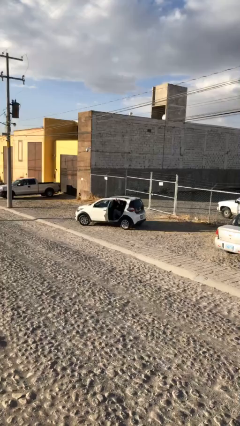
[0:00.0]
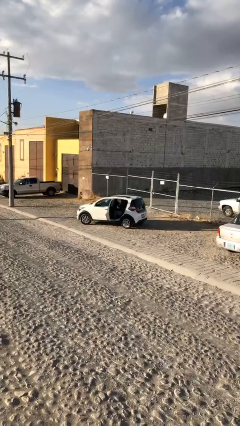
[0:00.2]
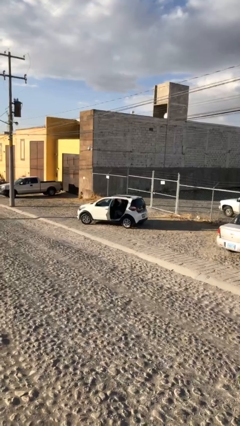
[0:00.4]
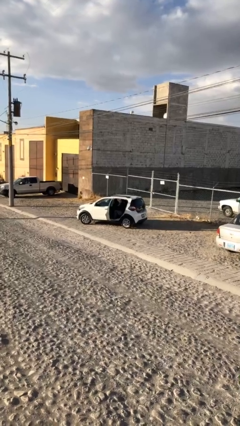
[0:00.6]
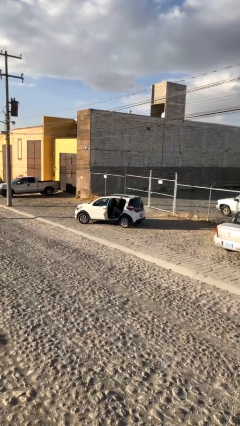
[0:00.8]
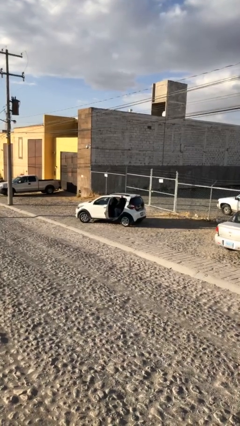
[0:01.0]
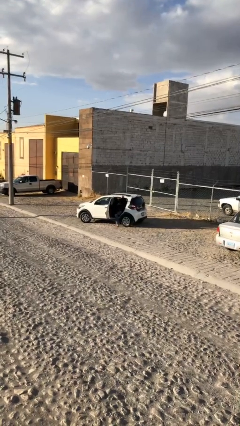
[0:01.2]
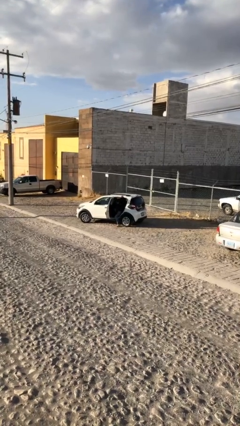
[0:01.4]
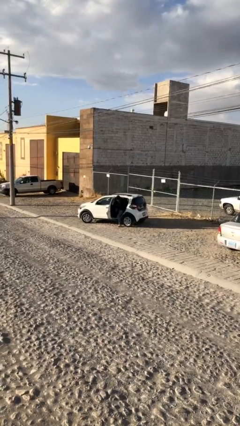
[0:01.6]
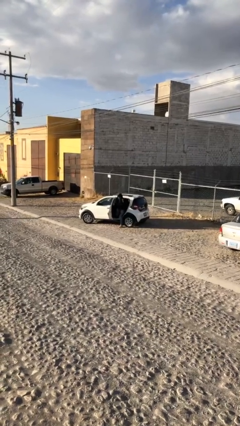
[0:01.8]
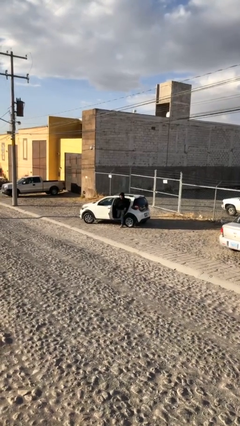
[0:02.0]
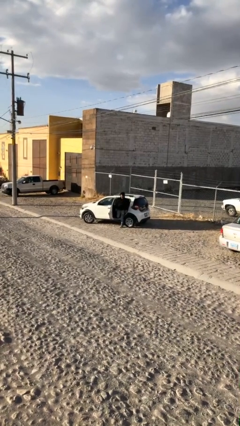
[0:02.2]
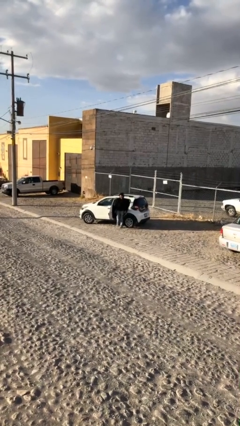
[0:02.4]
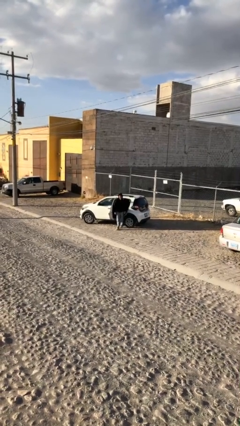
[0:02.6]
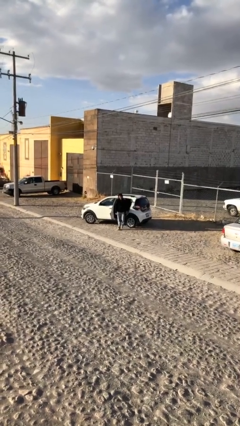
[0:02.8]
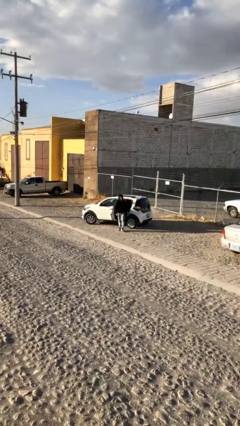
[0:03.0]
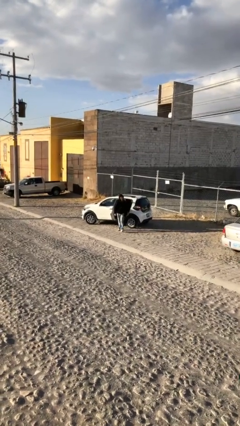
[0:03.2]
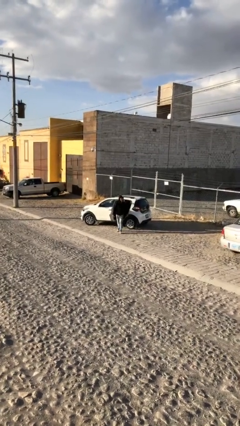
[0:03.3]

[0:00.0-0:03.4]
person exits car

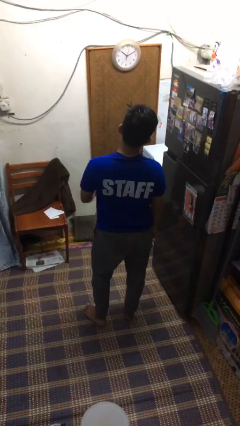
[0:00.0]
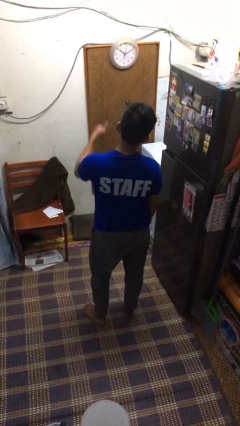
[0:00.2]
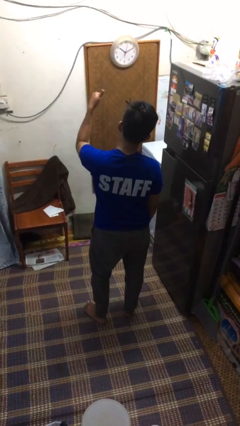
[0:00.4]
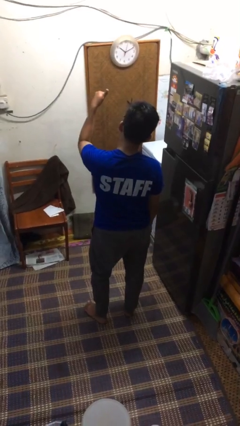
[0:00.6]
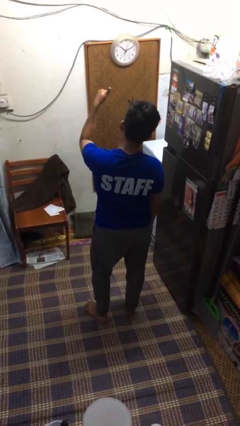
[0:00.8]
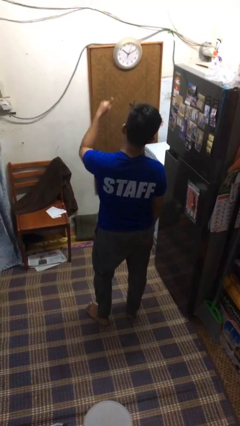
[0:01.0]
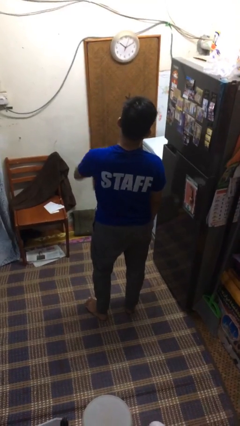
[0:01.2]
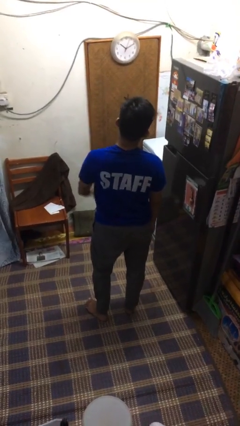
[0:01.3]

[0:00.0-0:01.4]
person gestures thumbs up

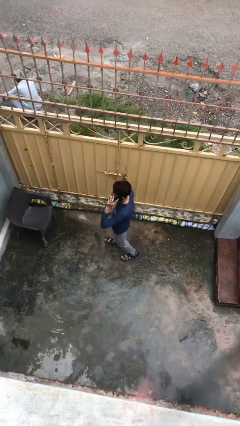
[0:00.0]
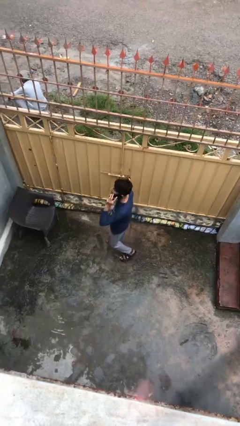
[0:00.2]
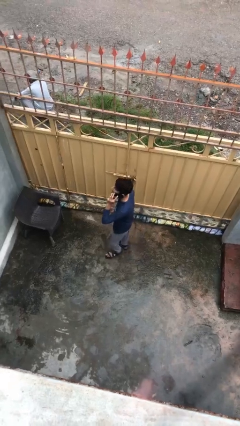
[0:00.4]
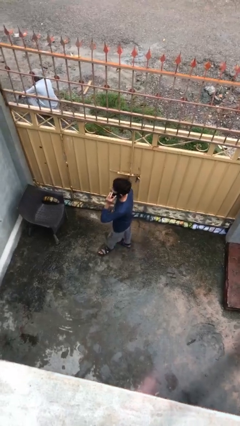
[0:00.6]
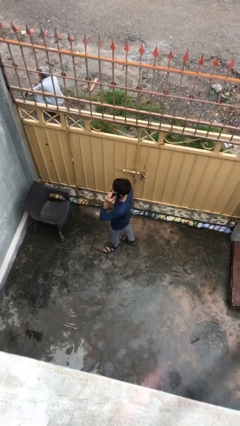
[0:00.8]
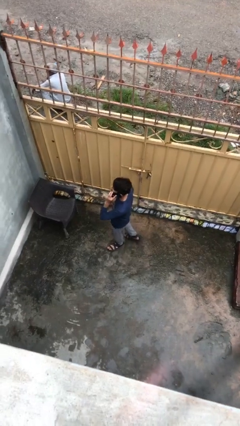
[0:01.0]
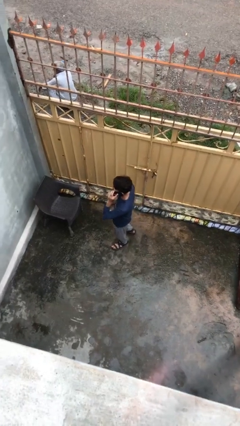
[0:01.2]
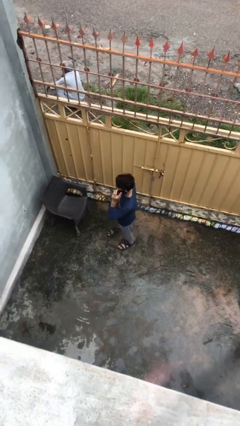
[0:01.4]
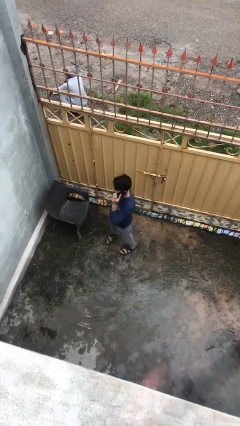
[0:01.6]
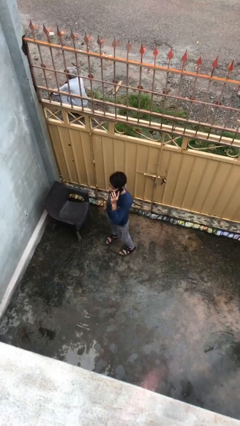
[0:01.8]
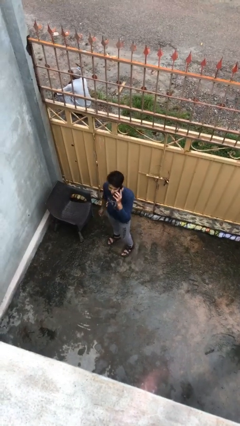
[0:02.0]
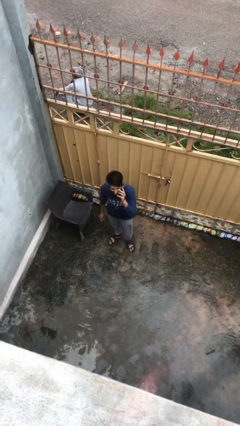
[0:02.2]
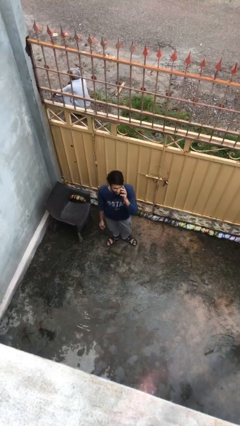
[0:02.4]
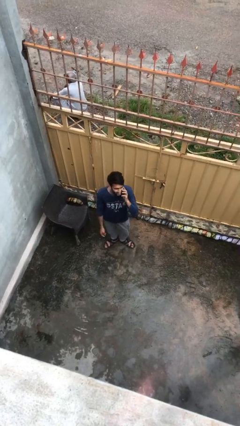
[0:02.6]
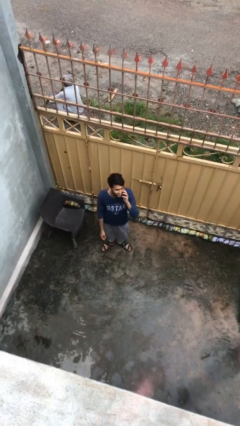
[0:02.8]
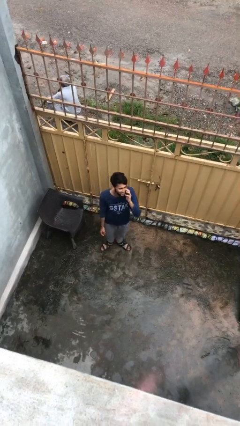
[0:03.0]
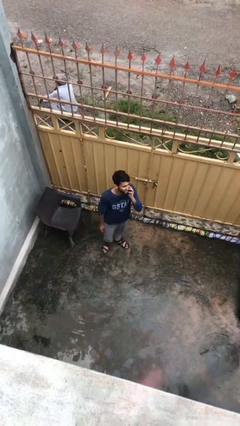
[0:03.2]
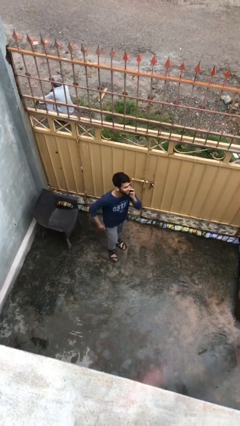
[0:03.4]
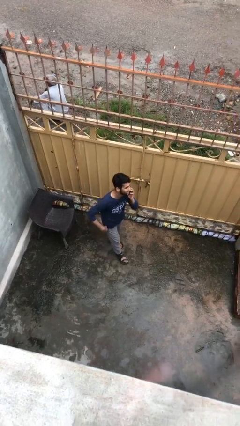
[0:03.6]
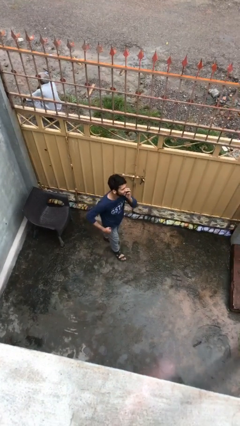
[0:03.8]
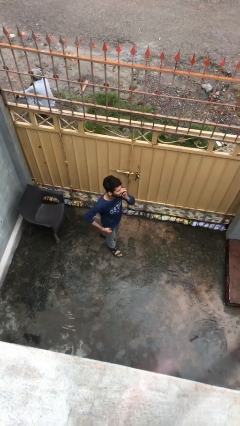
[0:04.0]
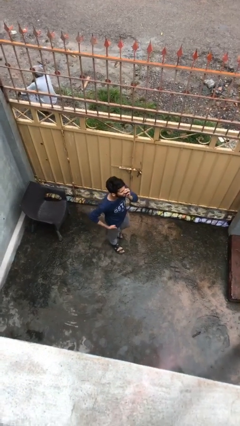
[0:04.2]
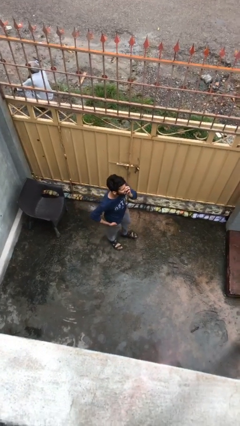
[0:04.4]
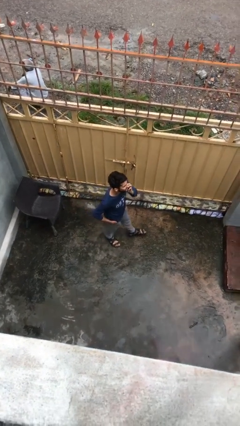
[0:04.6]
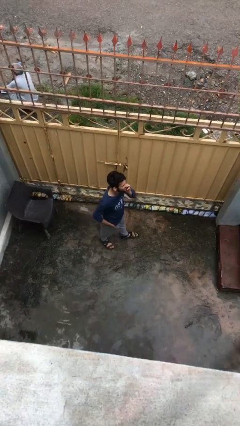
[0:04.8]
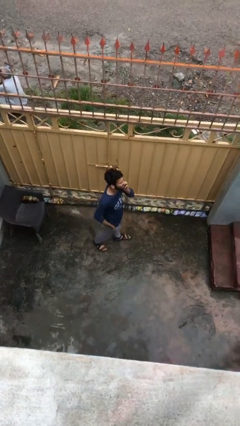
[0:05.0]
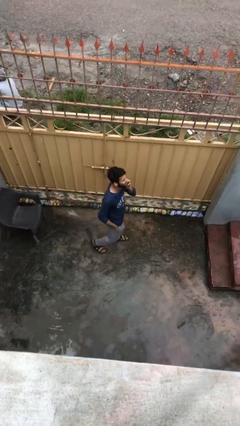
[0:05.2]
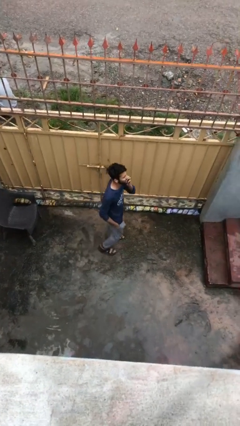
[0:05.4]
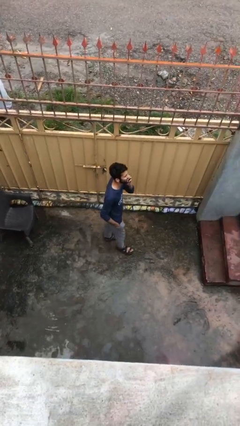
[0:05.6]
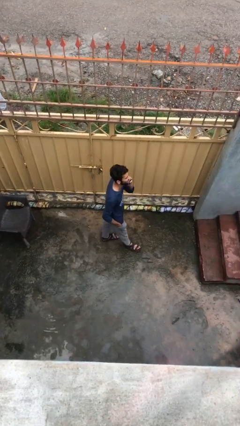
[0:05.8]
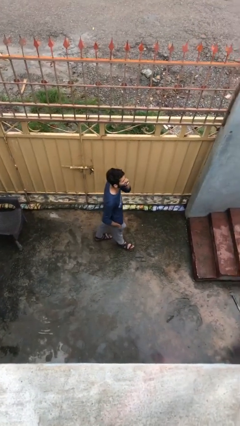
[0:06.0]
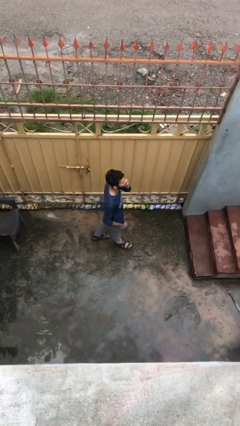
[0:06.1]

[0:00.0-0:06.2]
person talks on phone

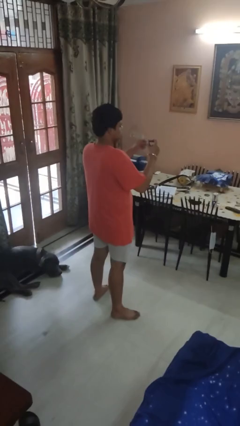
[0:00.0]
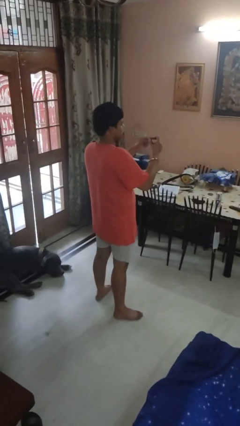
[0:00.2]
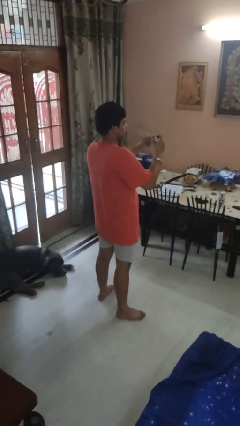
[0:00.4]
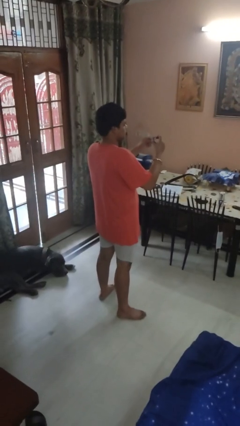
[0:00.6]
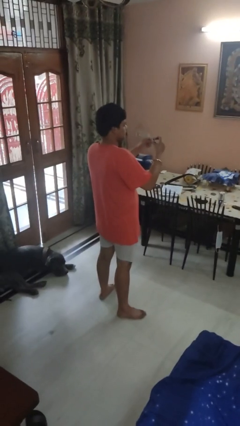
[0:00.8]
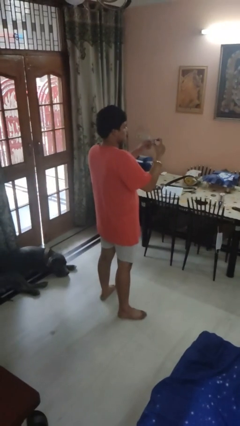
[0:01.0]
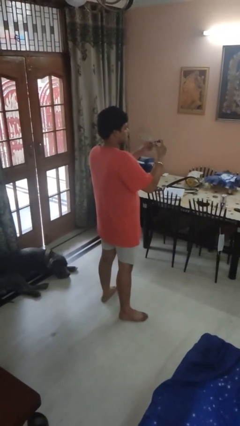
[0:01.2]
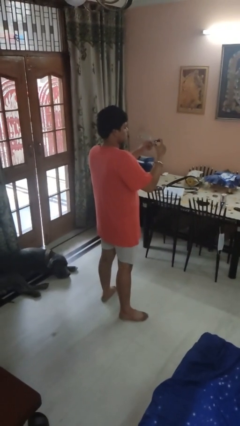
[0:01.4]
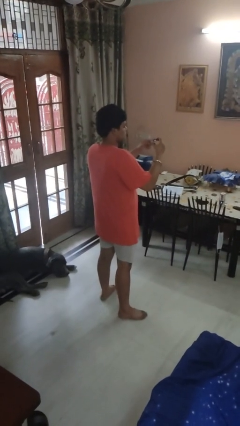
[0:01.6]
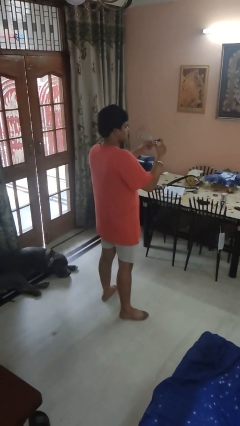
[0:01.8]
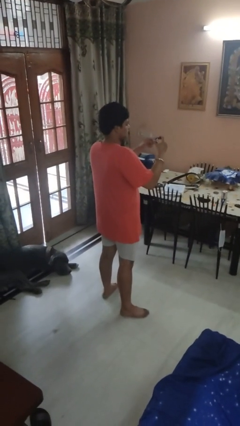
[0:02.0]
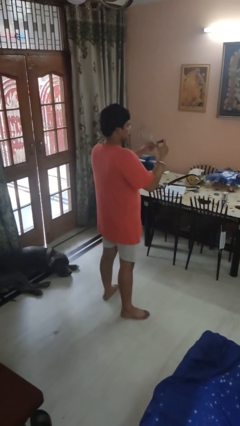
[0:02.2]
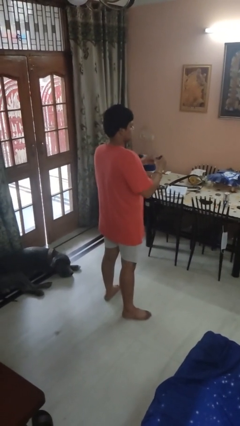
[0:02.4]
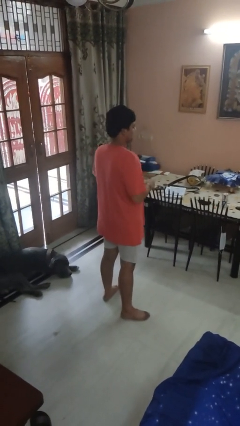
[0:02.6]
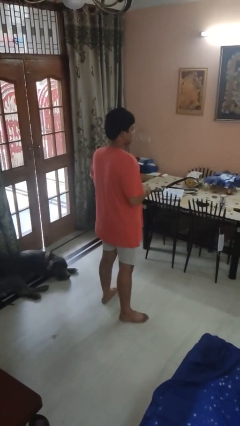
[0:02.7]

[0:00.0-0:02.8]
person clips fingernails

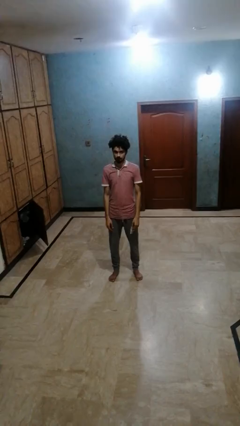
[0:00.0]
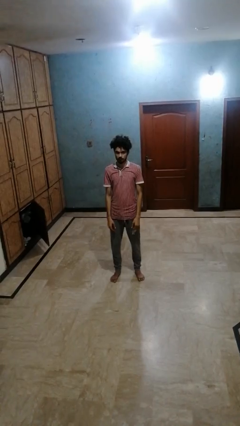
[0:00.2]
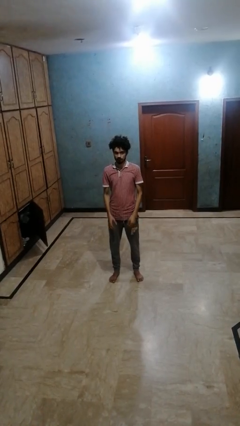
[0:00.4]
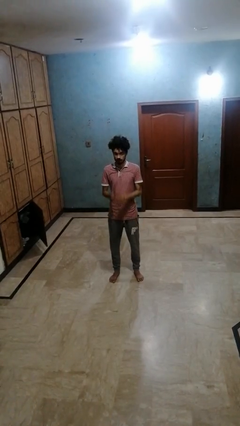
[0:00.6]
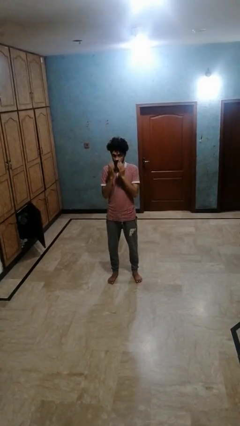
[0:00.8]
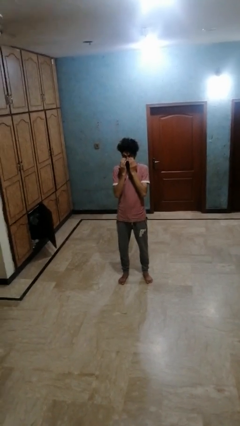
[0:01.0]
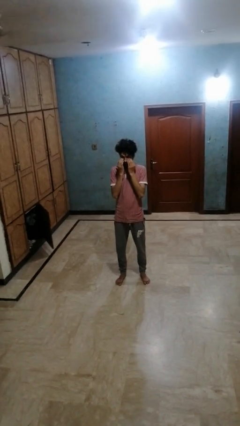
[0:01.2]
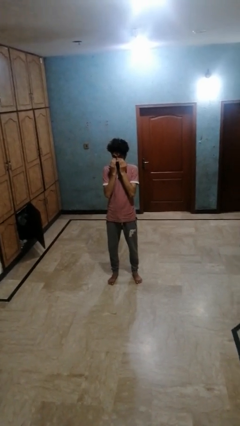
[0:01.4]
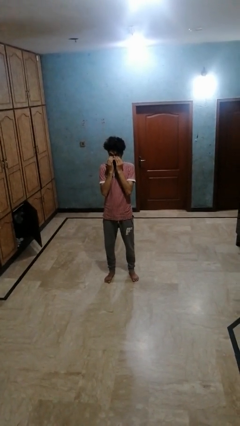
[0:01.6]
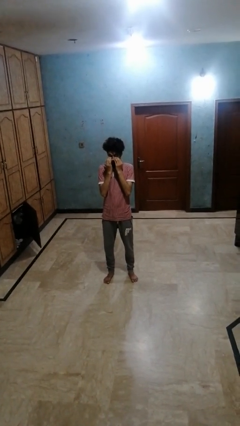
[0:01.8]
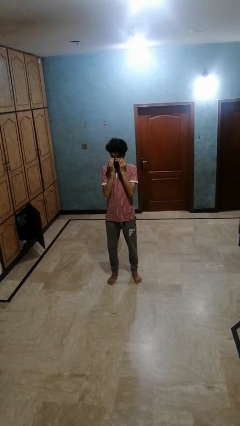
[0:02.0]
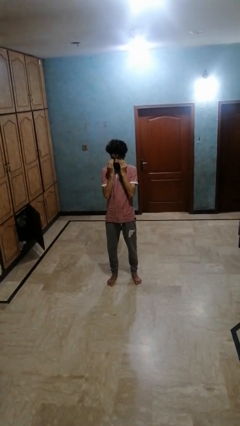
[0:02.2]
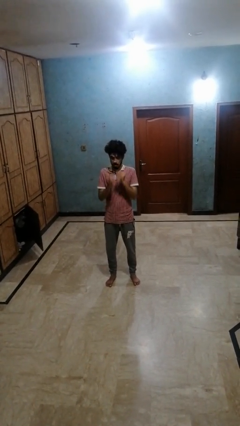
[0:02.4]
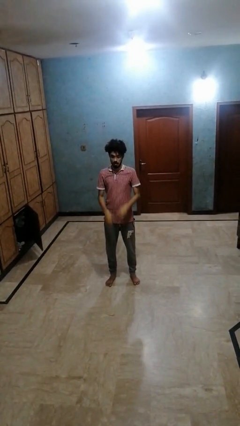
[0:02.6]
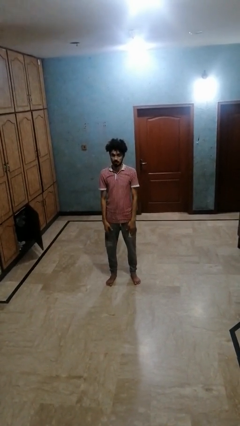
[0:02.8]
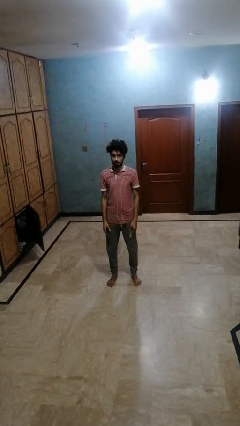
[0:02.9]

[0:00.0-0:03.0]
person rubs eyes

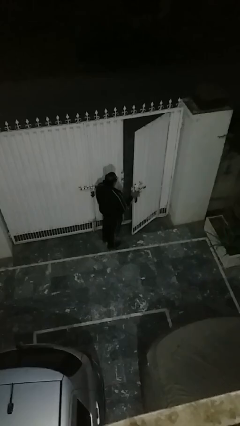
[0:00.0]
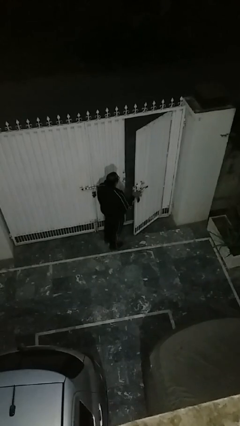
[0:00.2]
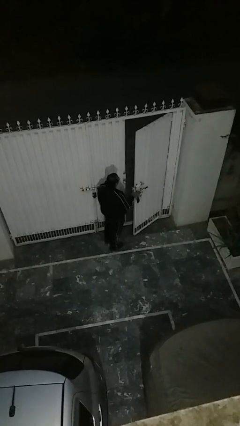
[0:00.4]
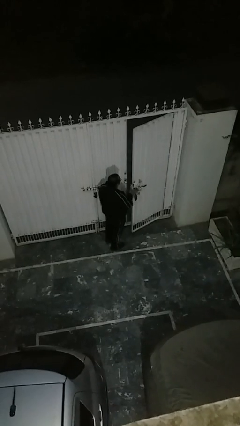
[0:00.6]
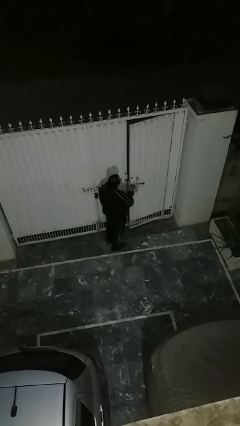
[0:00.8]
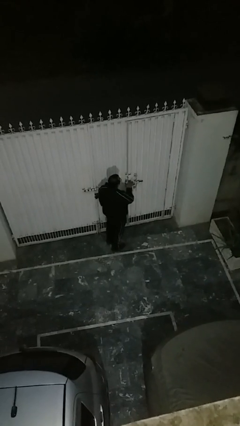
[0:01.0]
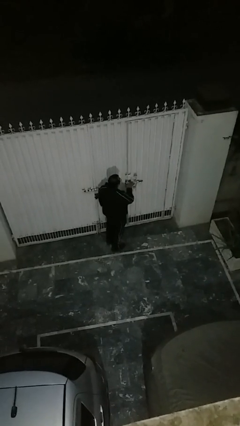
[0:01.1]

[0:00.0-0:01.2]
person closes facility door
